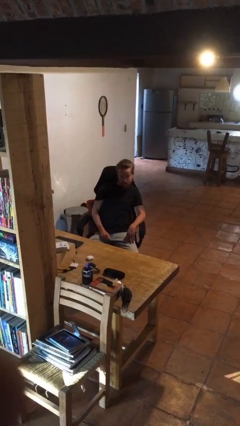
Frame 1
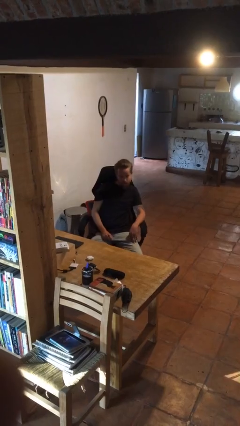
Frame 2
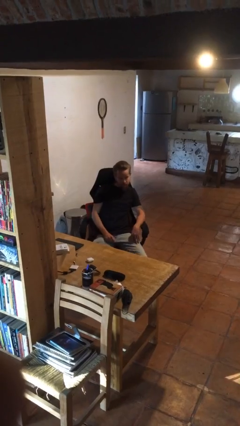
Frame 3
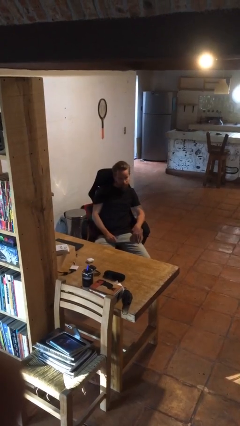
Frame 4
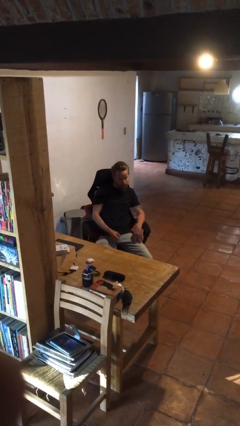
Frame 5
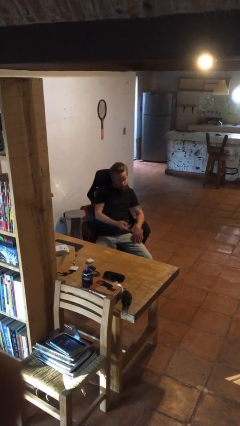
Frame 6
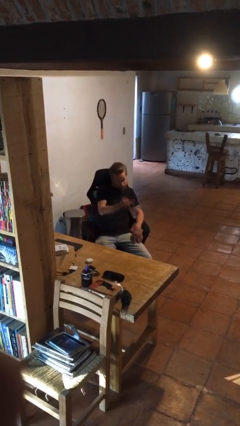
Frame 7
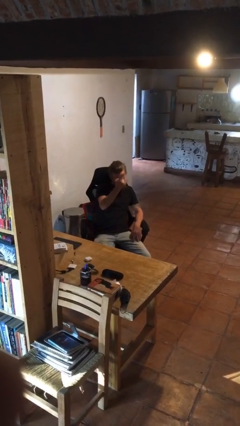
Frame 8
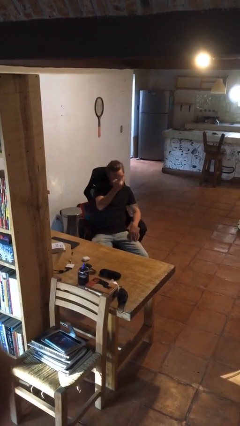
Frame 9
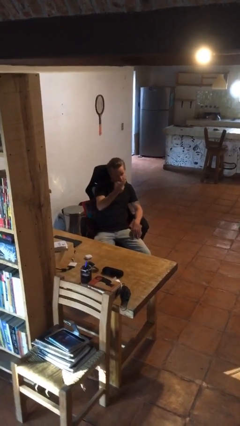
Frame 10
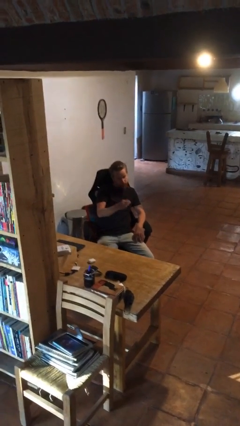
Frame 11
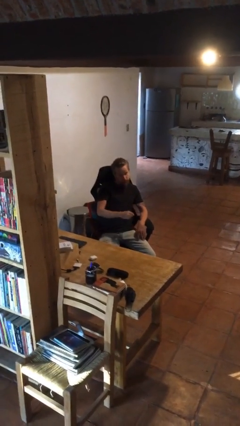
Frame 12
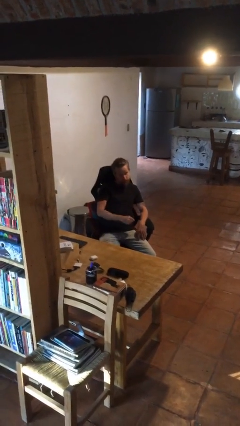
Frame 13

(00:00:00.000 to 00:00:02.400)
person gestures swipe up

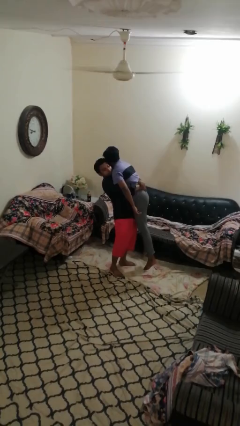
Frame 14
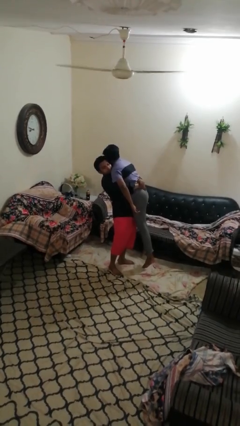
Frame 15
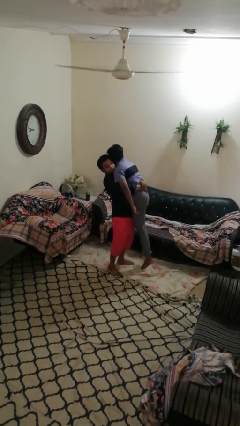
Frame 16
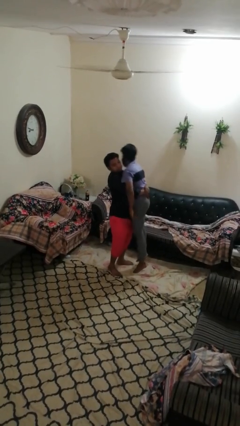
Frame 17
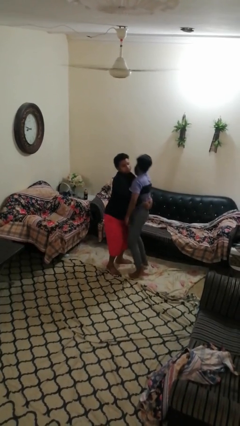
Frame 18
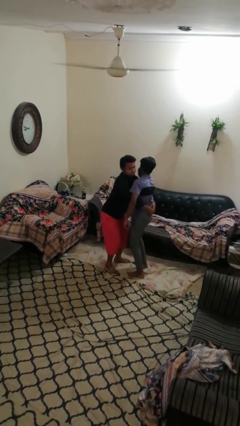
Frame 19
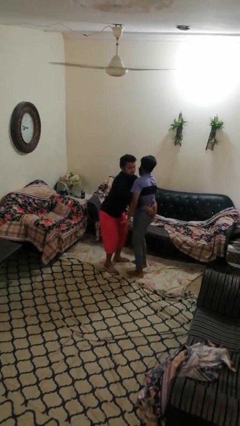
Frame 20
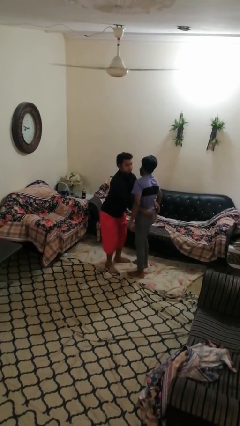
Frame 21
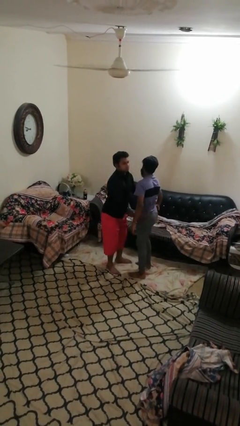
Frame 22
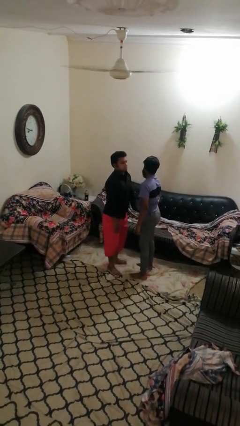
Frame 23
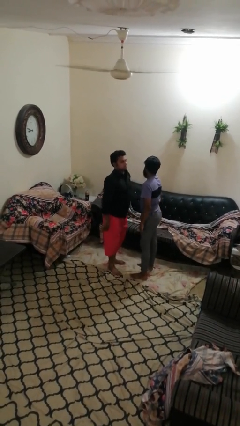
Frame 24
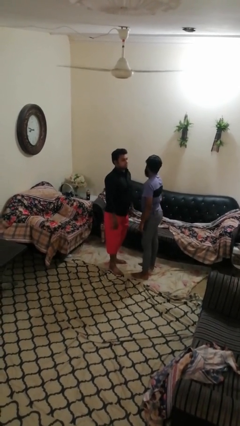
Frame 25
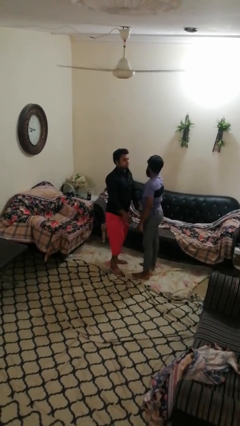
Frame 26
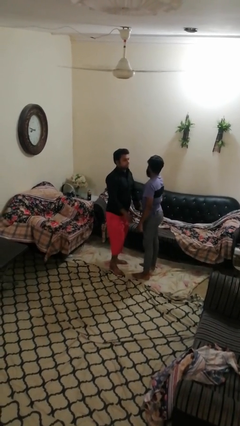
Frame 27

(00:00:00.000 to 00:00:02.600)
person puts down person

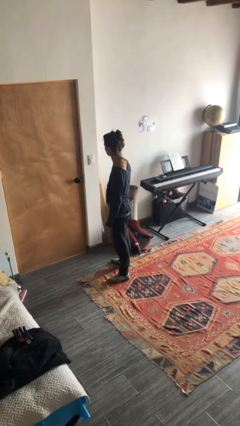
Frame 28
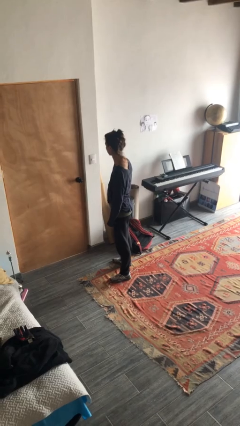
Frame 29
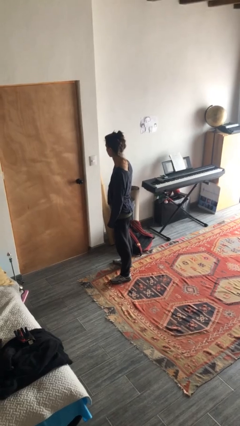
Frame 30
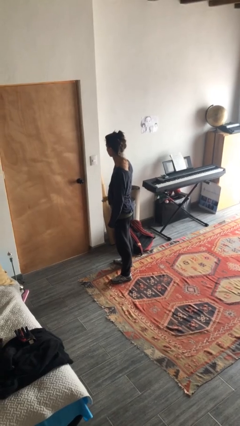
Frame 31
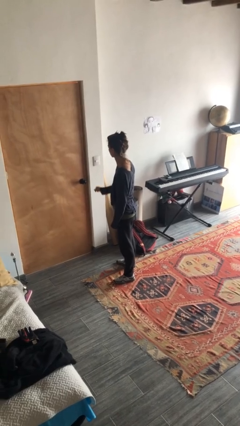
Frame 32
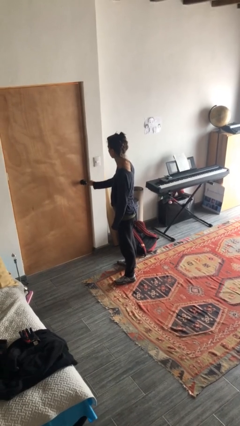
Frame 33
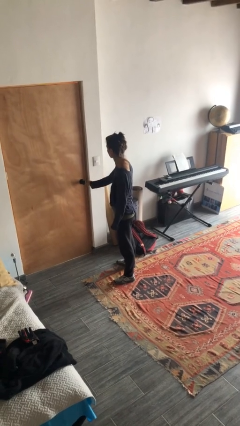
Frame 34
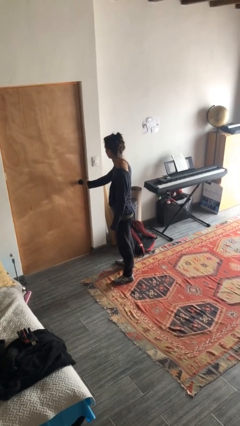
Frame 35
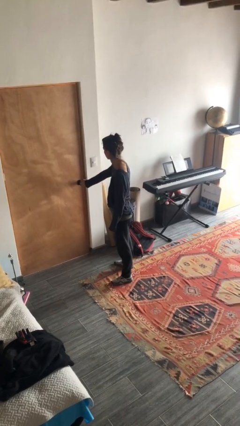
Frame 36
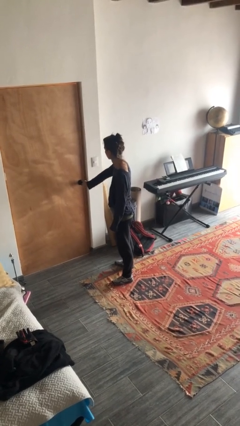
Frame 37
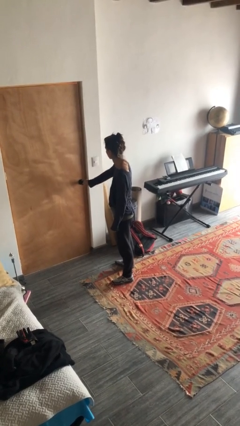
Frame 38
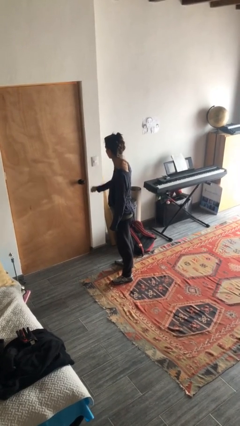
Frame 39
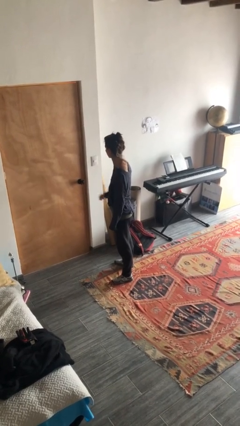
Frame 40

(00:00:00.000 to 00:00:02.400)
person unlocks door with keys

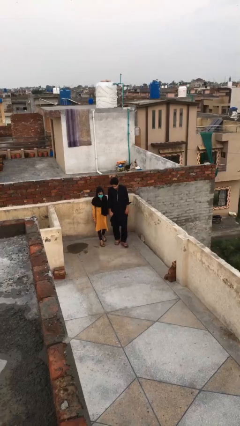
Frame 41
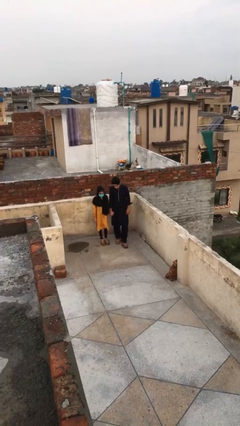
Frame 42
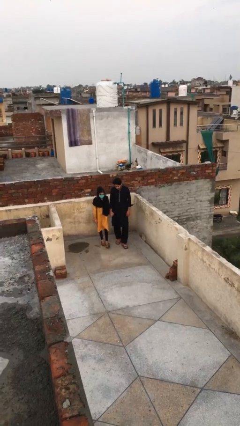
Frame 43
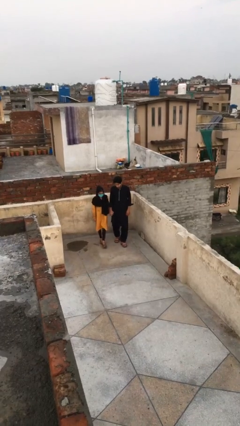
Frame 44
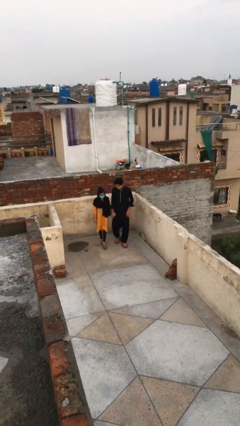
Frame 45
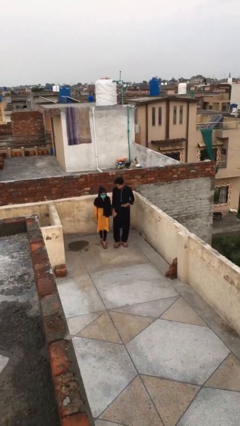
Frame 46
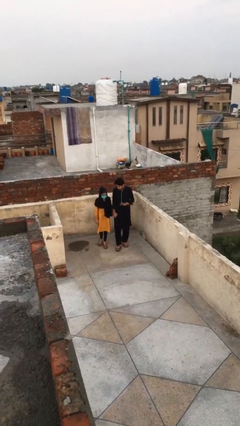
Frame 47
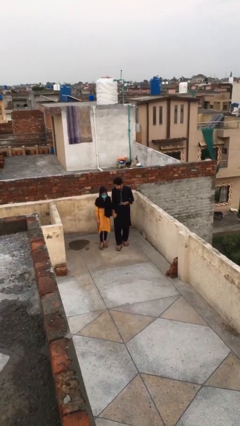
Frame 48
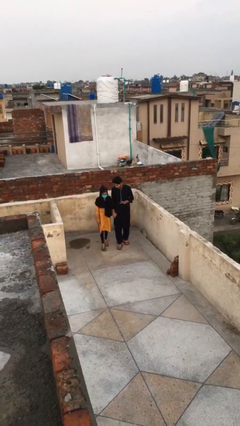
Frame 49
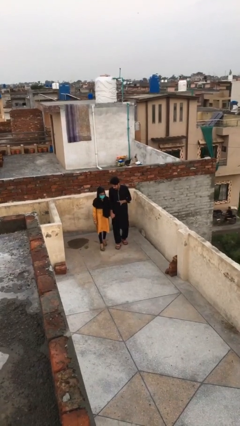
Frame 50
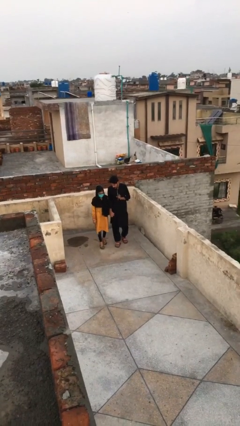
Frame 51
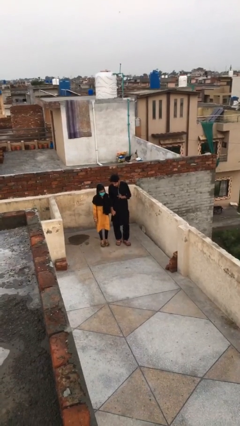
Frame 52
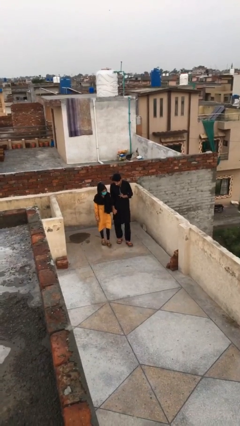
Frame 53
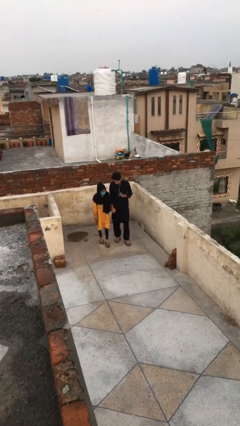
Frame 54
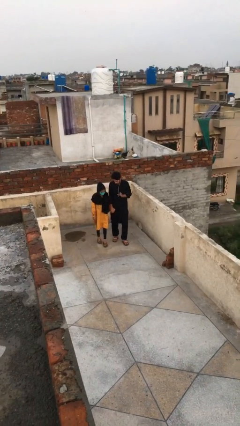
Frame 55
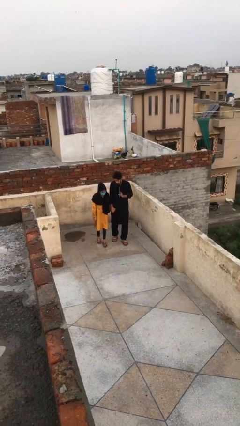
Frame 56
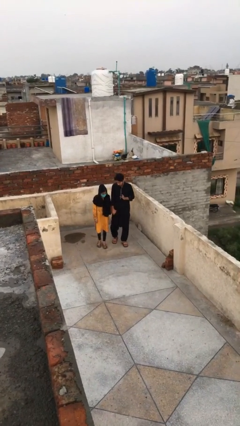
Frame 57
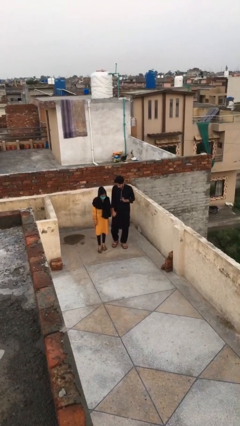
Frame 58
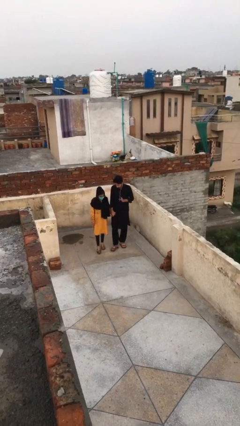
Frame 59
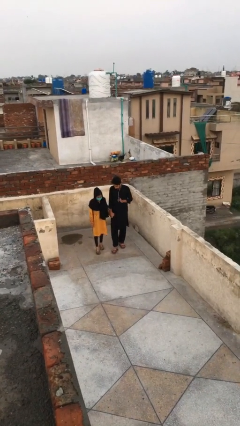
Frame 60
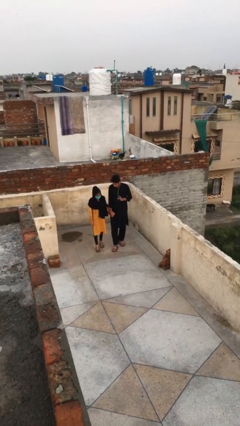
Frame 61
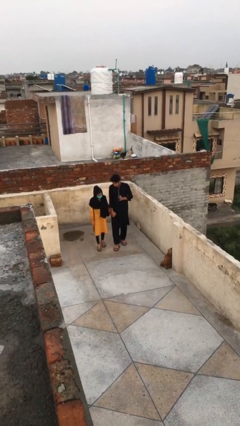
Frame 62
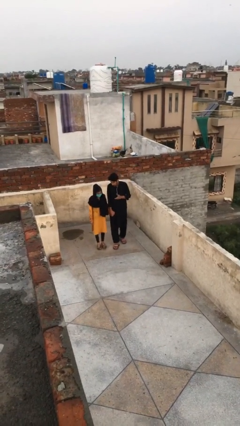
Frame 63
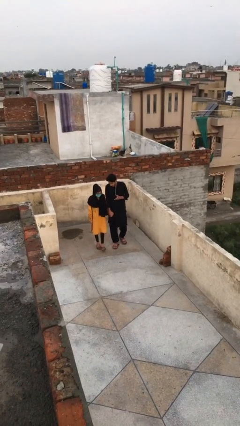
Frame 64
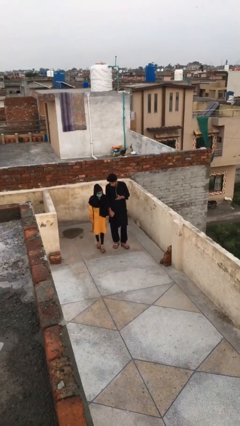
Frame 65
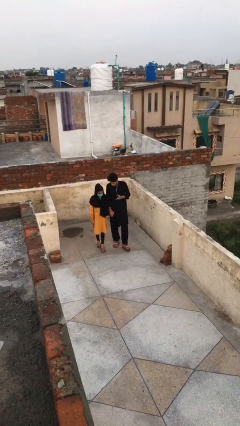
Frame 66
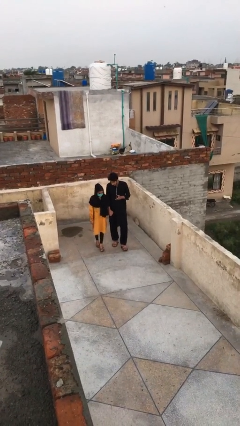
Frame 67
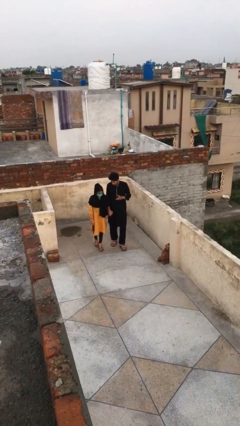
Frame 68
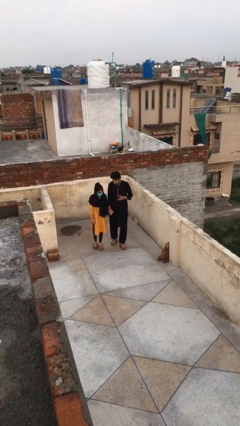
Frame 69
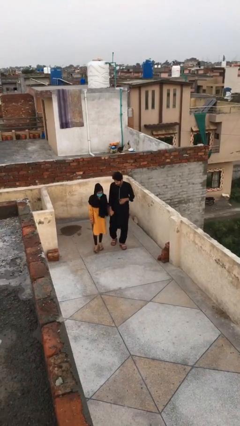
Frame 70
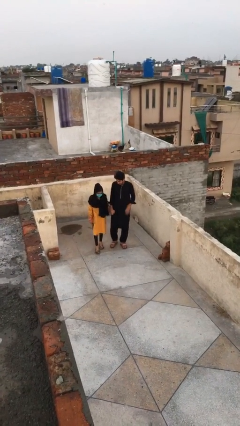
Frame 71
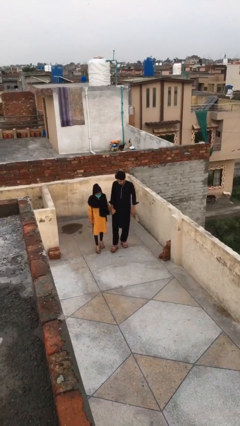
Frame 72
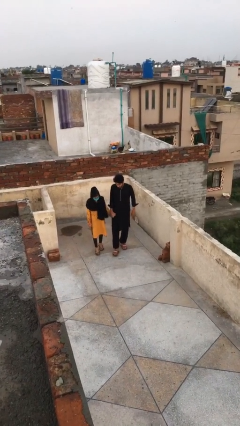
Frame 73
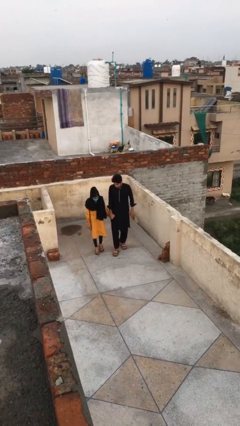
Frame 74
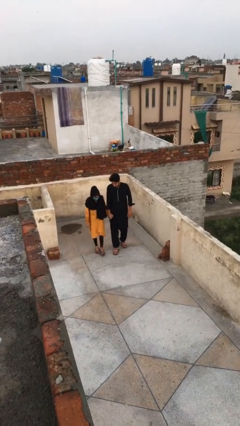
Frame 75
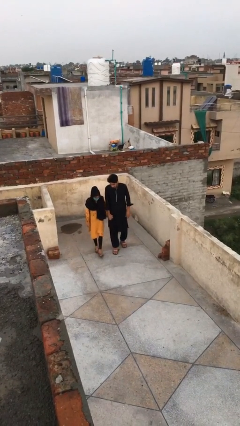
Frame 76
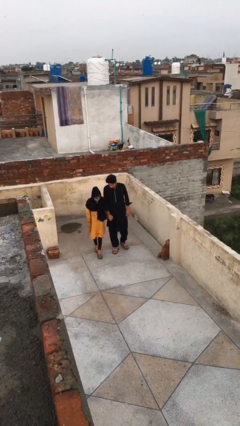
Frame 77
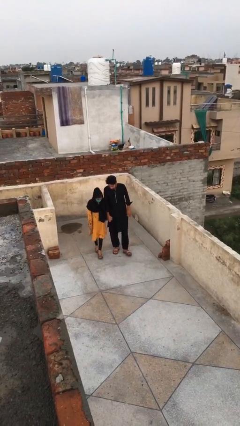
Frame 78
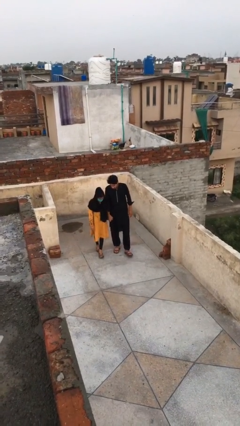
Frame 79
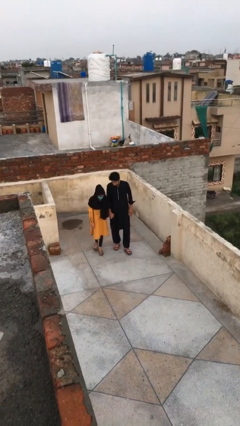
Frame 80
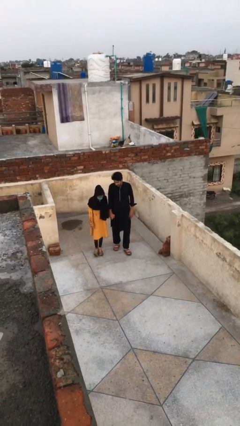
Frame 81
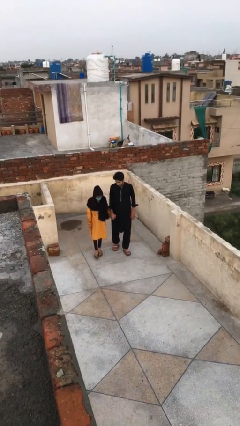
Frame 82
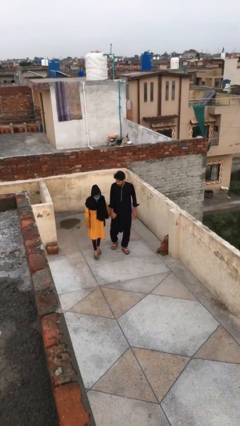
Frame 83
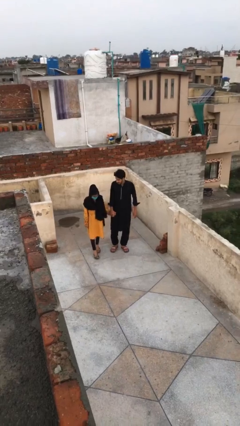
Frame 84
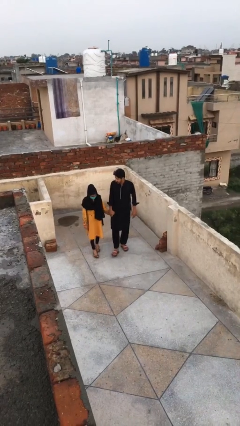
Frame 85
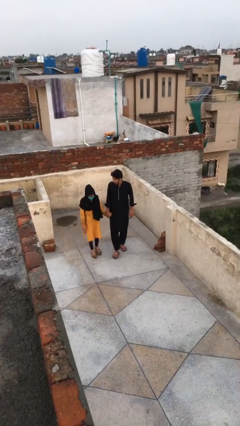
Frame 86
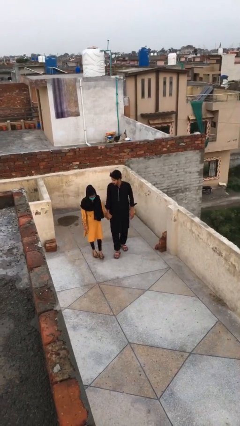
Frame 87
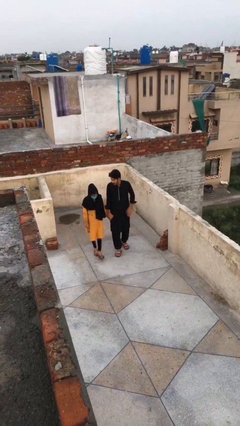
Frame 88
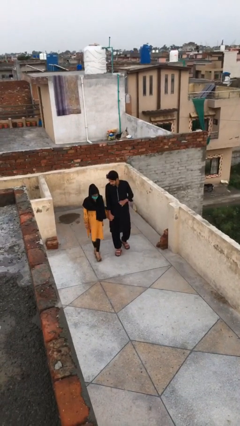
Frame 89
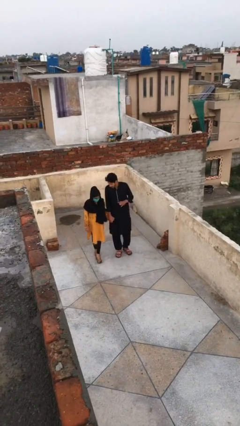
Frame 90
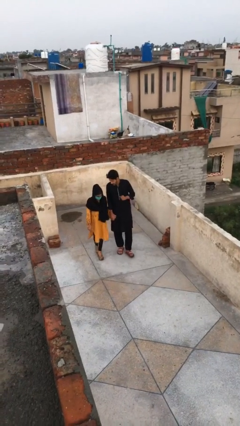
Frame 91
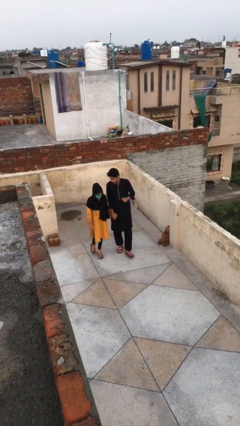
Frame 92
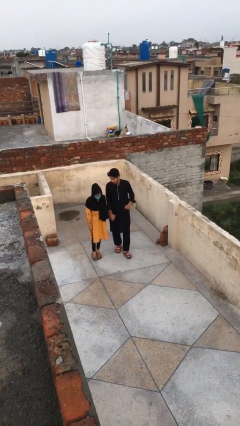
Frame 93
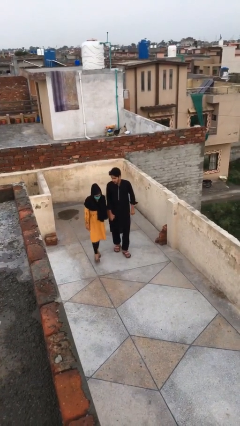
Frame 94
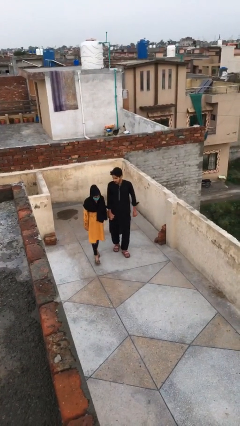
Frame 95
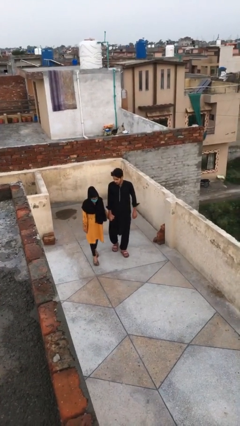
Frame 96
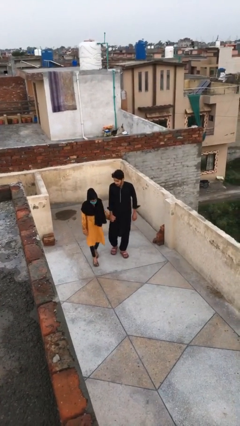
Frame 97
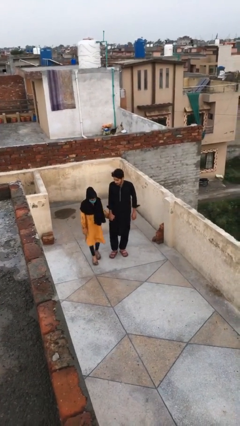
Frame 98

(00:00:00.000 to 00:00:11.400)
person holds hand
